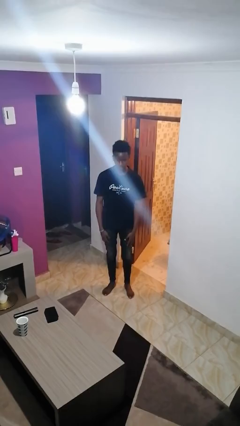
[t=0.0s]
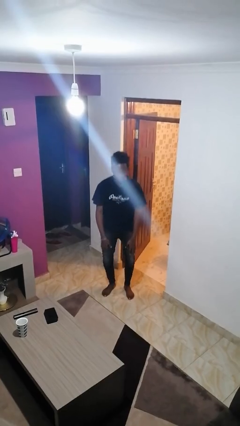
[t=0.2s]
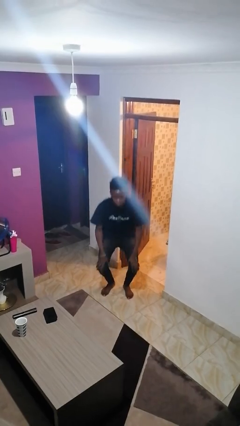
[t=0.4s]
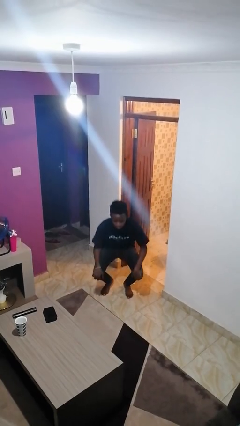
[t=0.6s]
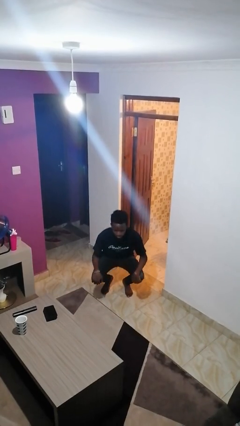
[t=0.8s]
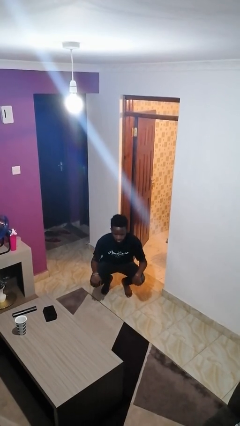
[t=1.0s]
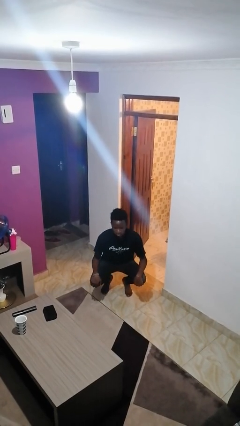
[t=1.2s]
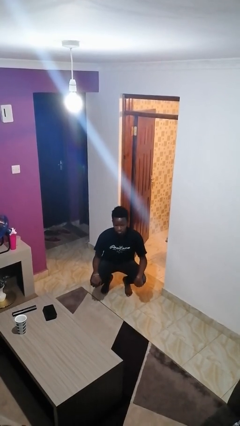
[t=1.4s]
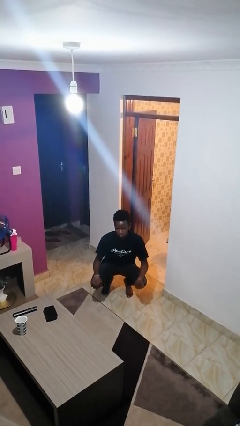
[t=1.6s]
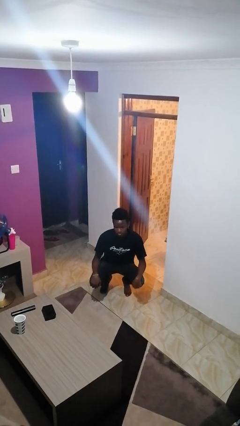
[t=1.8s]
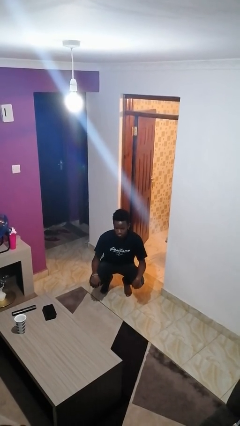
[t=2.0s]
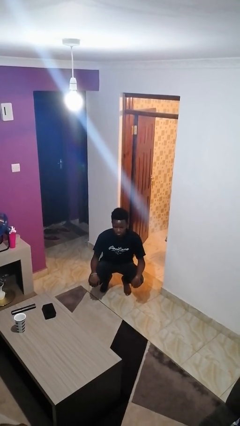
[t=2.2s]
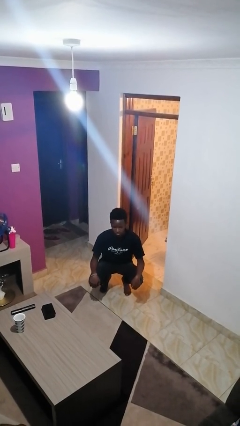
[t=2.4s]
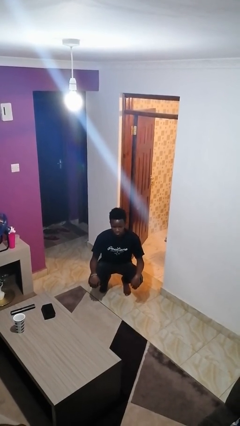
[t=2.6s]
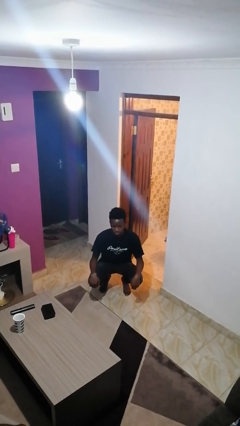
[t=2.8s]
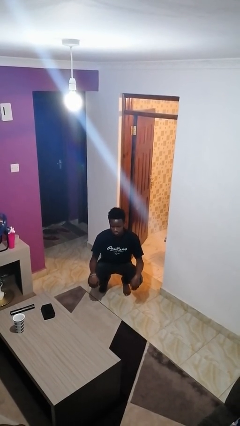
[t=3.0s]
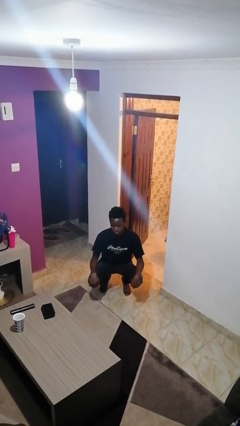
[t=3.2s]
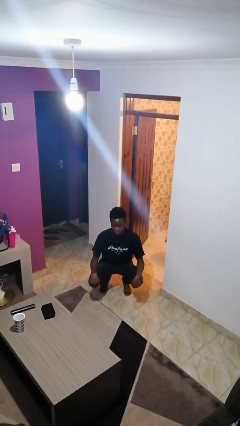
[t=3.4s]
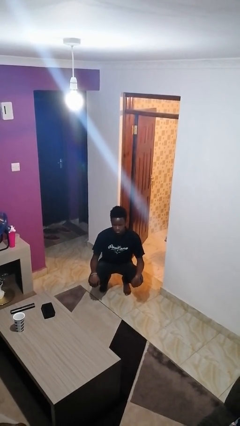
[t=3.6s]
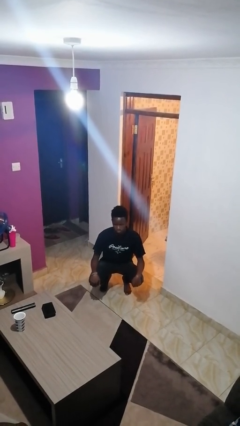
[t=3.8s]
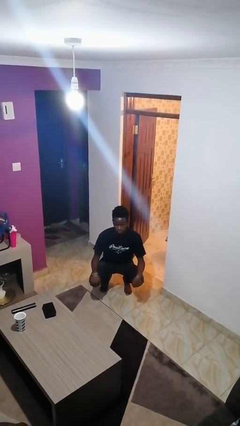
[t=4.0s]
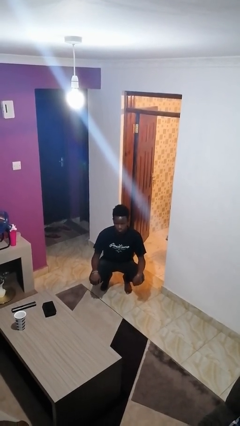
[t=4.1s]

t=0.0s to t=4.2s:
person squats

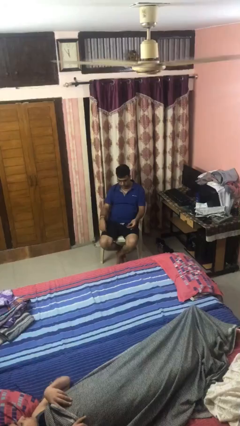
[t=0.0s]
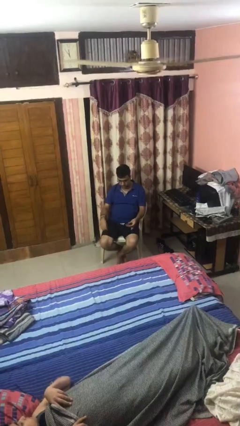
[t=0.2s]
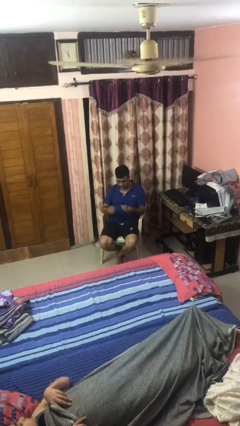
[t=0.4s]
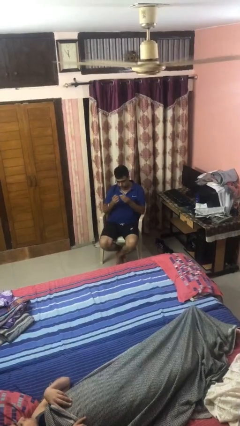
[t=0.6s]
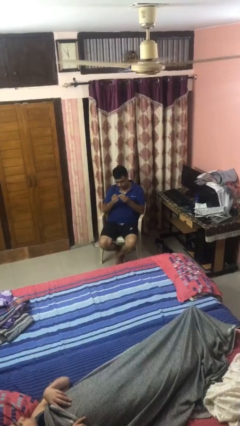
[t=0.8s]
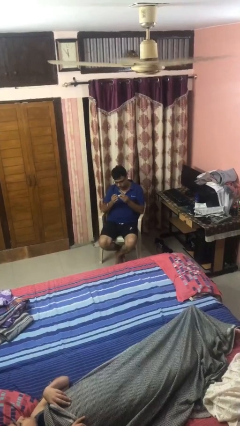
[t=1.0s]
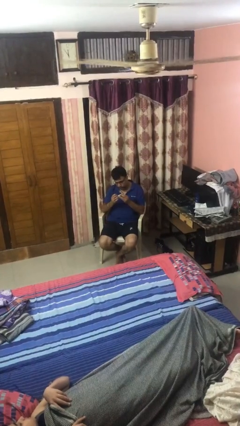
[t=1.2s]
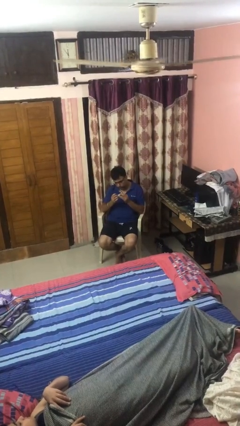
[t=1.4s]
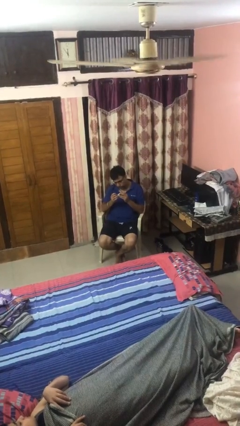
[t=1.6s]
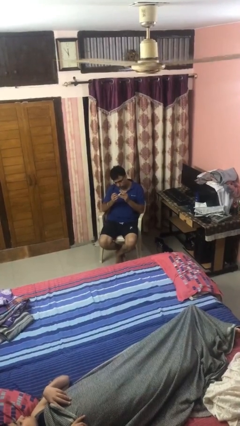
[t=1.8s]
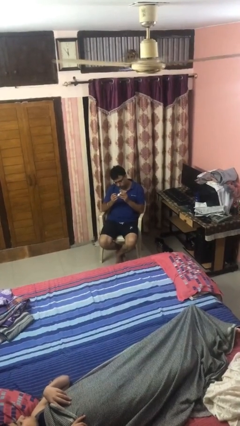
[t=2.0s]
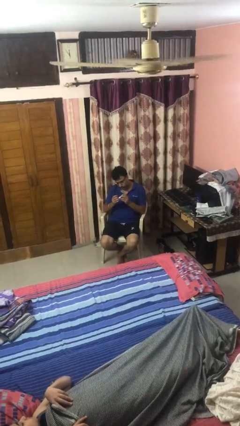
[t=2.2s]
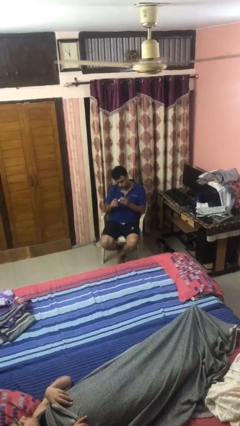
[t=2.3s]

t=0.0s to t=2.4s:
person clips fingernails

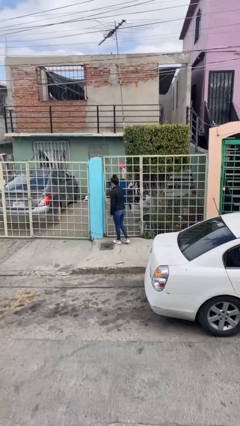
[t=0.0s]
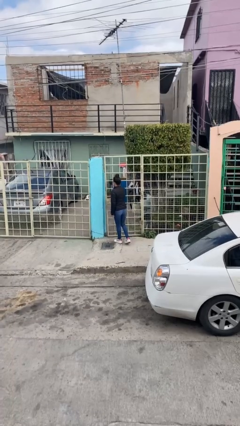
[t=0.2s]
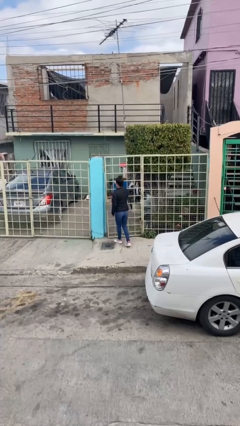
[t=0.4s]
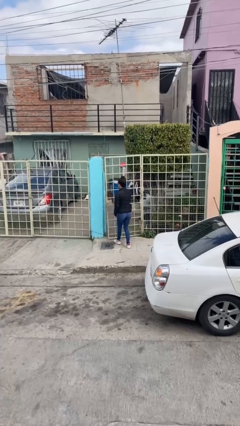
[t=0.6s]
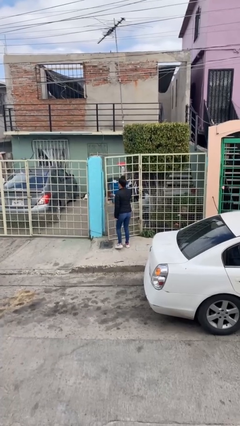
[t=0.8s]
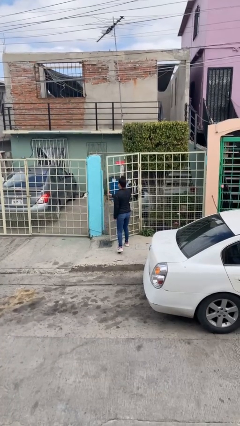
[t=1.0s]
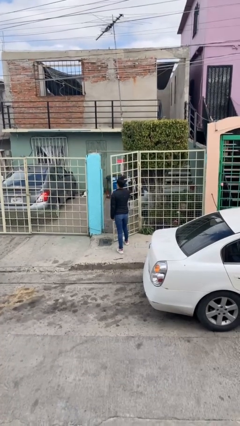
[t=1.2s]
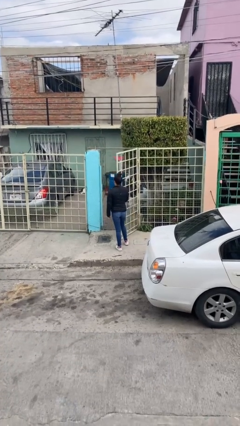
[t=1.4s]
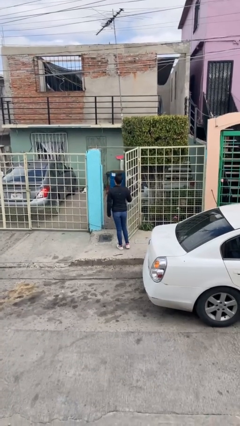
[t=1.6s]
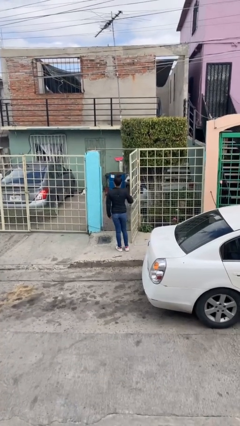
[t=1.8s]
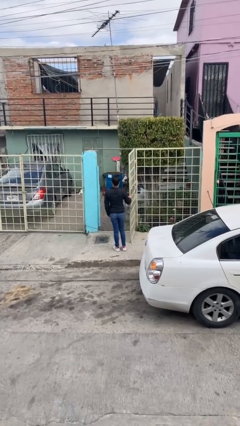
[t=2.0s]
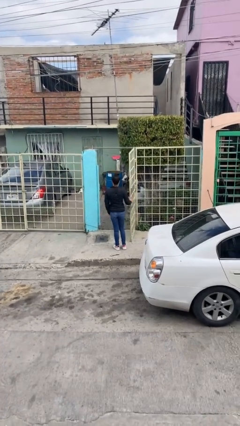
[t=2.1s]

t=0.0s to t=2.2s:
person opens facility door

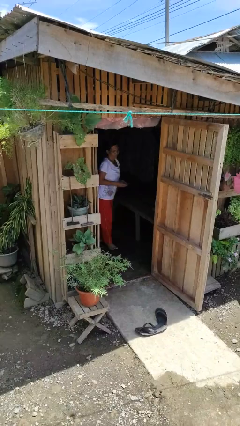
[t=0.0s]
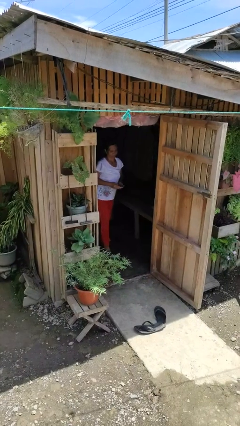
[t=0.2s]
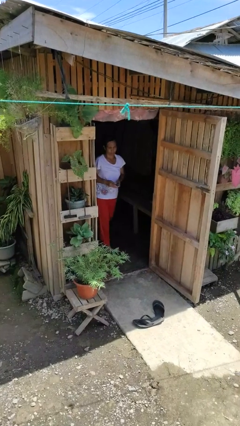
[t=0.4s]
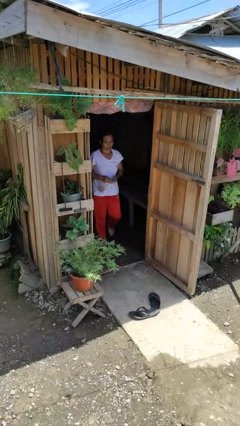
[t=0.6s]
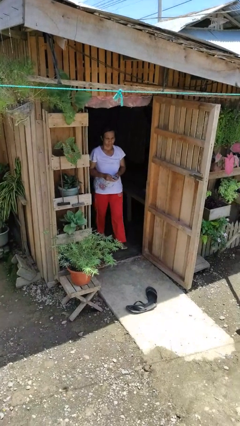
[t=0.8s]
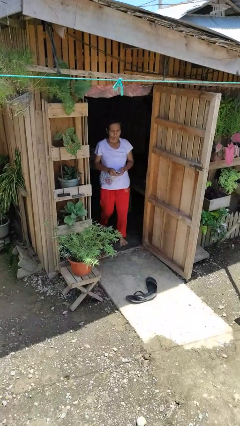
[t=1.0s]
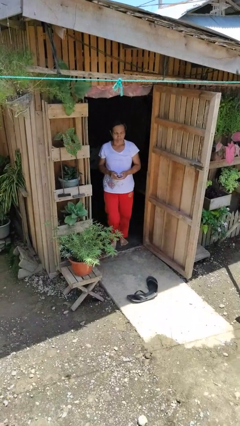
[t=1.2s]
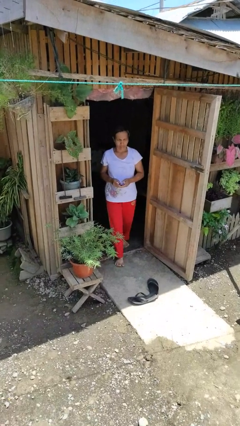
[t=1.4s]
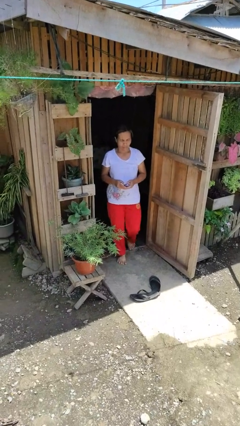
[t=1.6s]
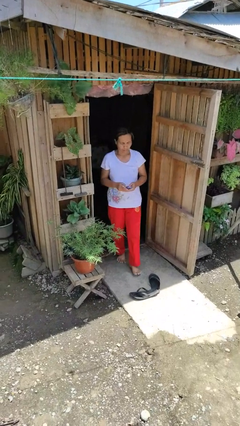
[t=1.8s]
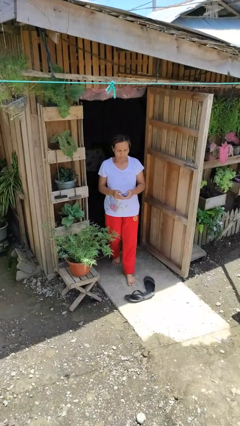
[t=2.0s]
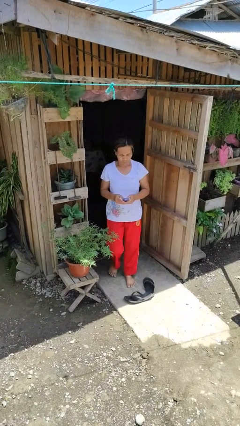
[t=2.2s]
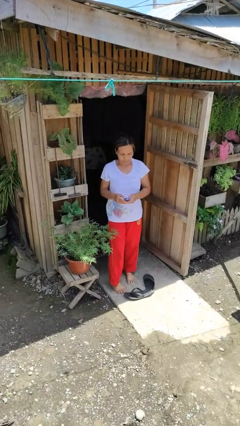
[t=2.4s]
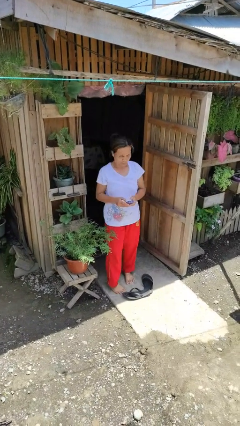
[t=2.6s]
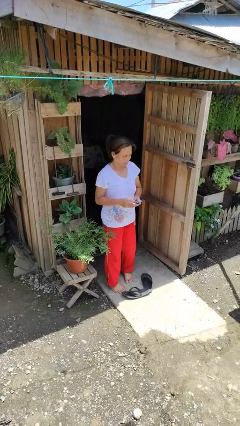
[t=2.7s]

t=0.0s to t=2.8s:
person enters scene through structure

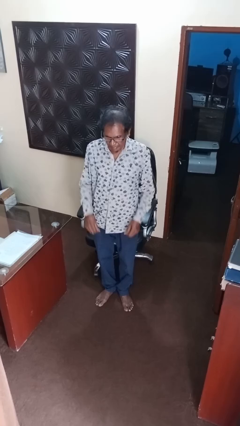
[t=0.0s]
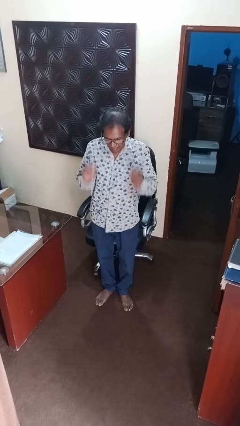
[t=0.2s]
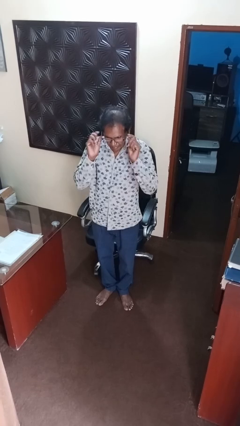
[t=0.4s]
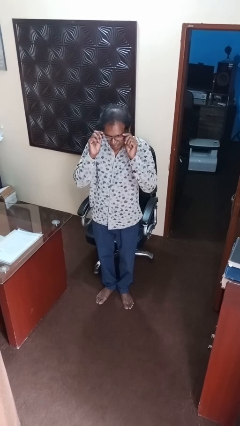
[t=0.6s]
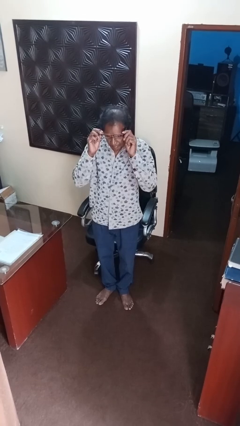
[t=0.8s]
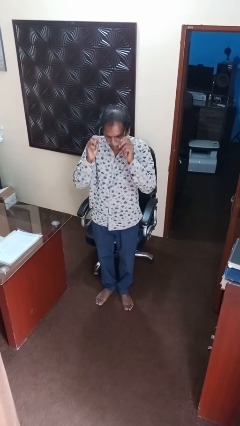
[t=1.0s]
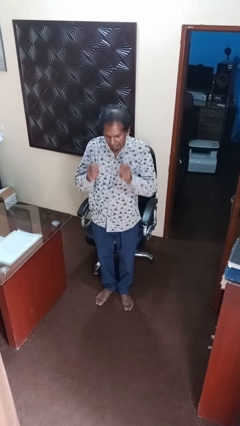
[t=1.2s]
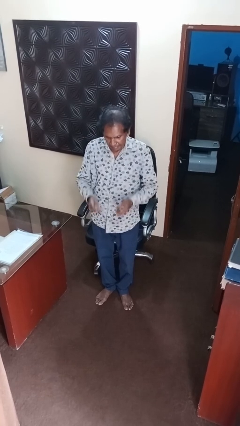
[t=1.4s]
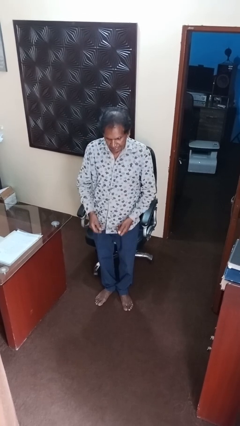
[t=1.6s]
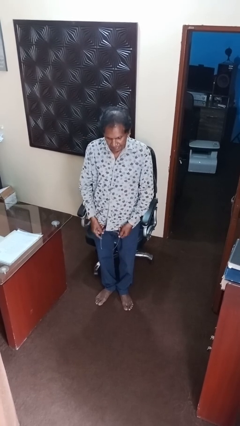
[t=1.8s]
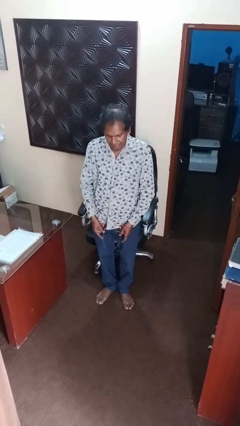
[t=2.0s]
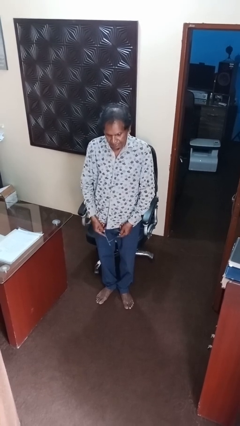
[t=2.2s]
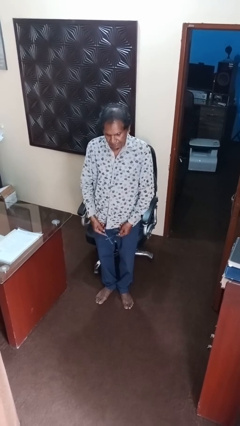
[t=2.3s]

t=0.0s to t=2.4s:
person takes off glasses

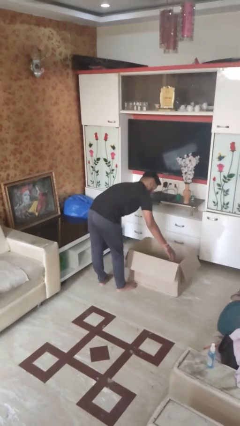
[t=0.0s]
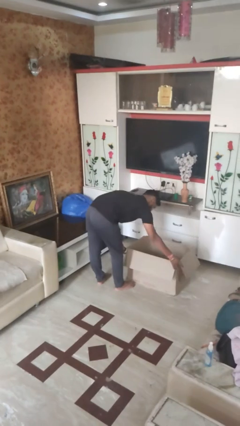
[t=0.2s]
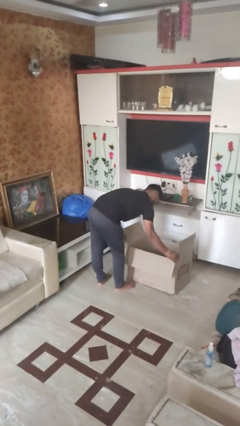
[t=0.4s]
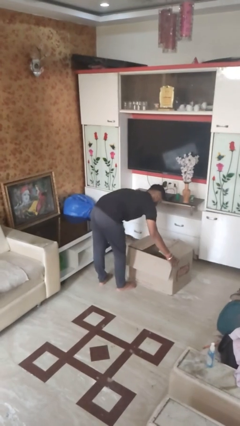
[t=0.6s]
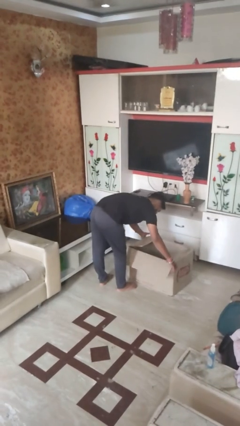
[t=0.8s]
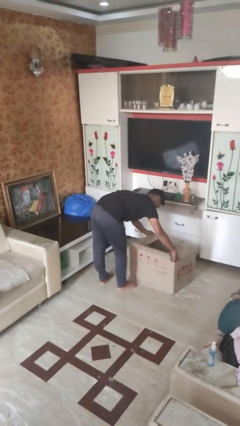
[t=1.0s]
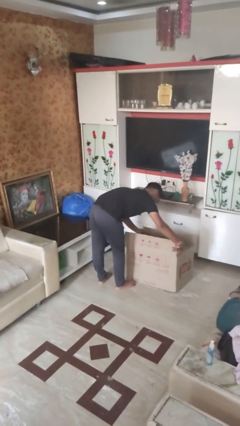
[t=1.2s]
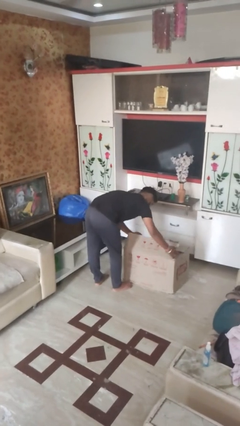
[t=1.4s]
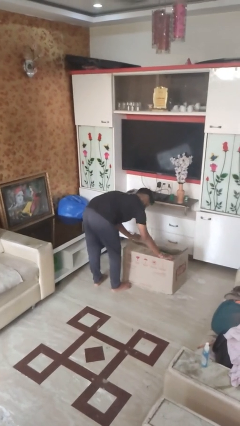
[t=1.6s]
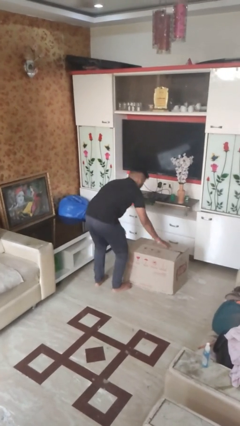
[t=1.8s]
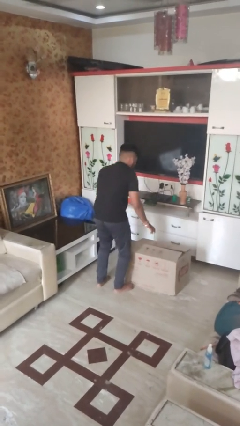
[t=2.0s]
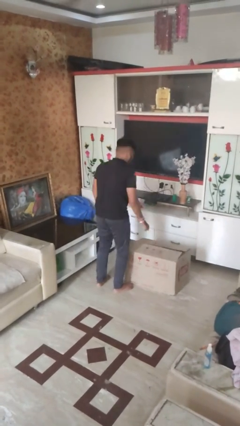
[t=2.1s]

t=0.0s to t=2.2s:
person closes box

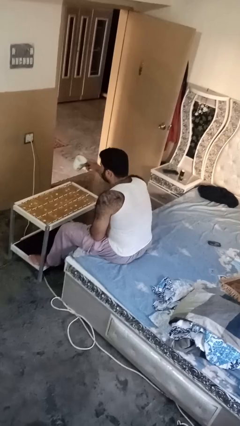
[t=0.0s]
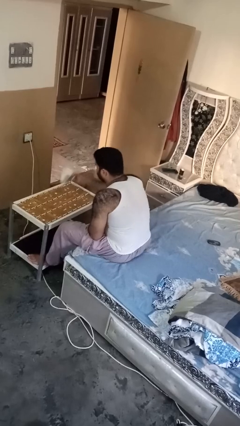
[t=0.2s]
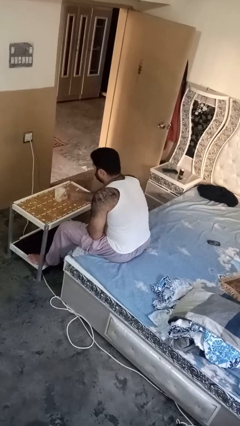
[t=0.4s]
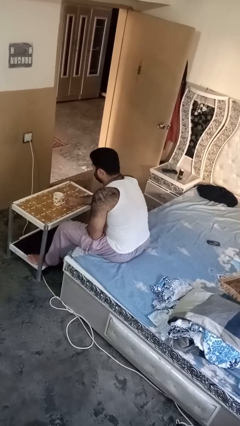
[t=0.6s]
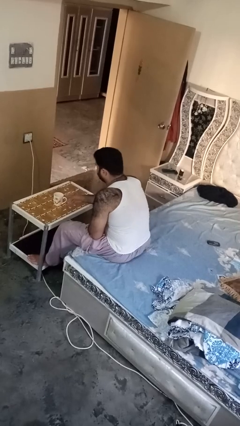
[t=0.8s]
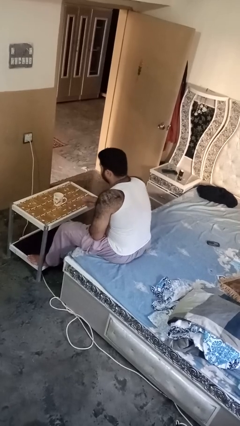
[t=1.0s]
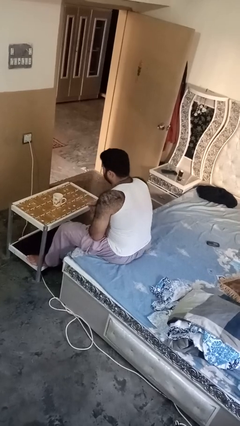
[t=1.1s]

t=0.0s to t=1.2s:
person puts down object on table
